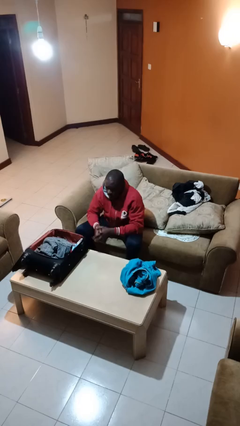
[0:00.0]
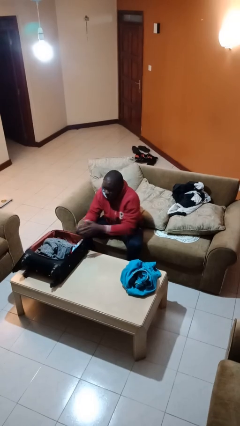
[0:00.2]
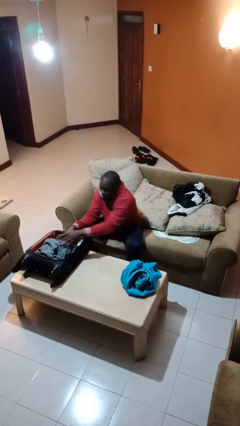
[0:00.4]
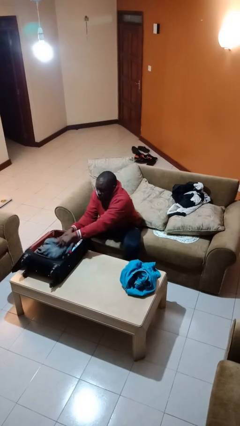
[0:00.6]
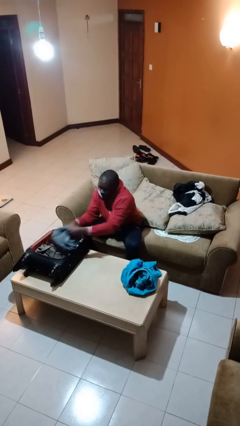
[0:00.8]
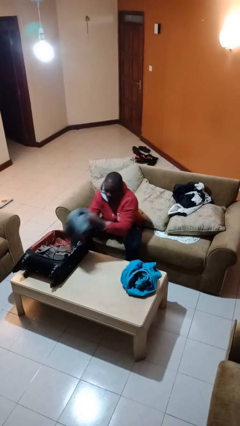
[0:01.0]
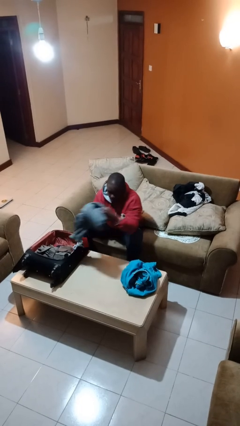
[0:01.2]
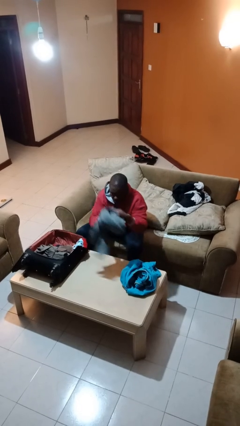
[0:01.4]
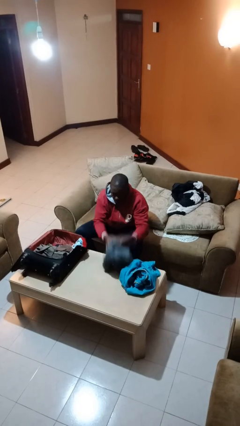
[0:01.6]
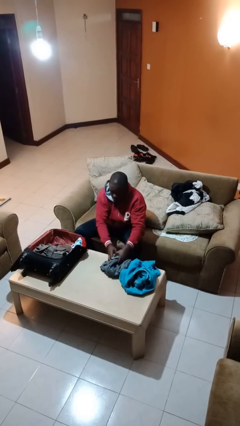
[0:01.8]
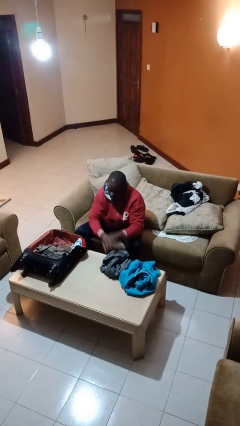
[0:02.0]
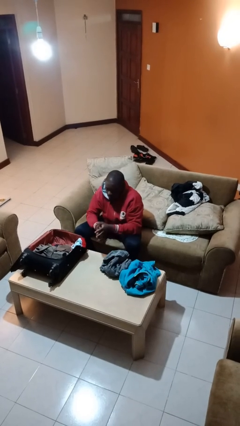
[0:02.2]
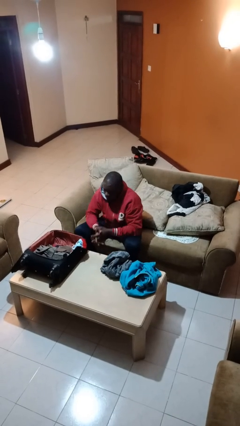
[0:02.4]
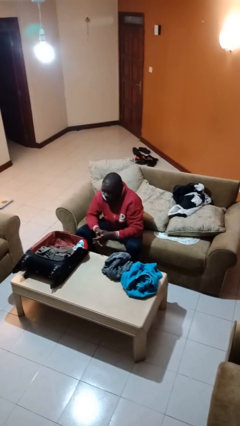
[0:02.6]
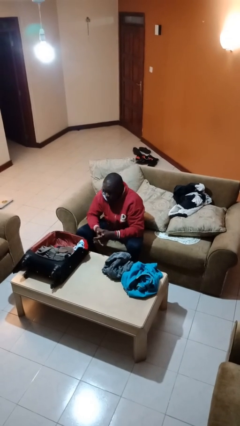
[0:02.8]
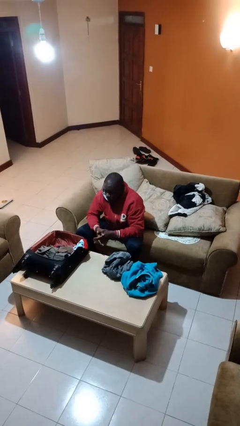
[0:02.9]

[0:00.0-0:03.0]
person unloads clothes from suitcase

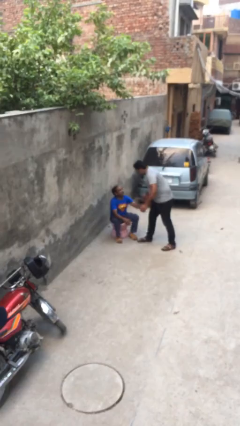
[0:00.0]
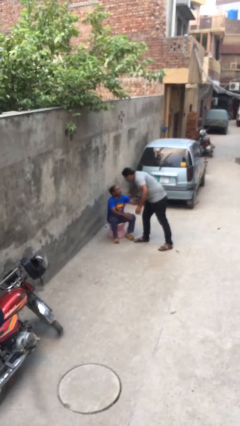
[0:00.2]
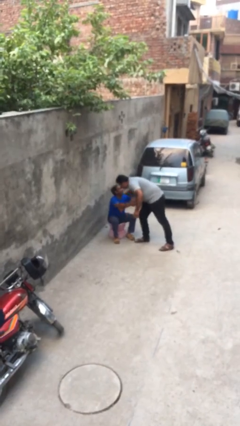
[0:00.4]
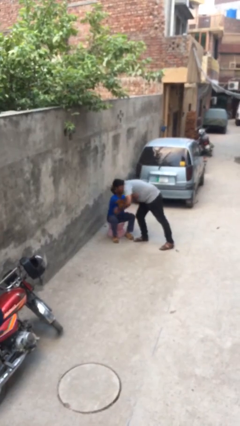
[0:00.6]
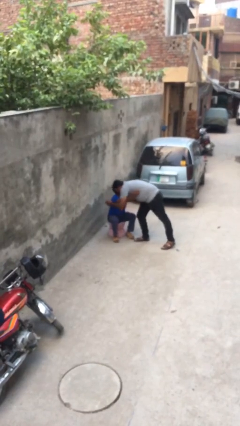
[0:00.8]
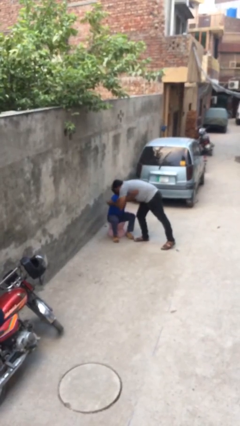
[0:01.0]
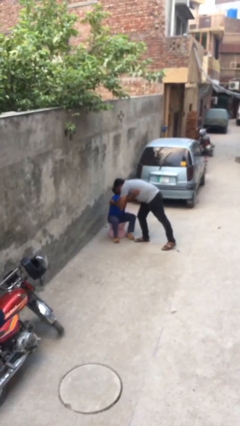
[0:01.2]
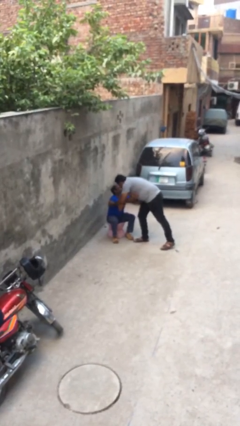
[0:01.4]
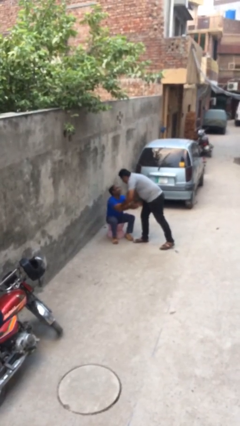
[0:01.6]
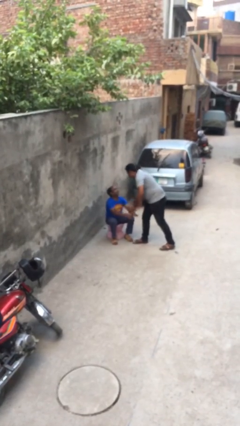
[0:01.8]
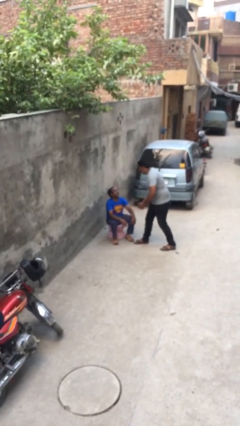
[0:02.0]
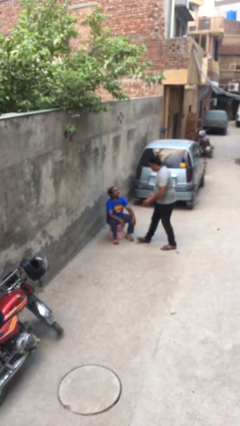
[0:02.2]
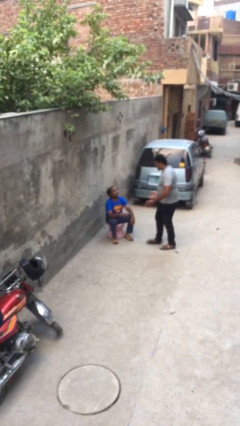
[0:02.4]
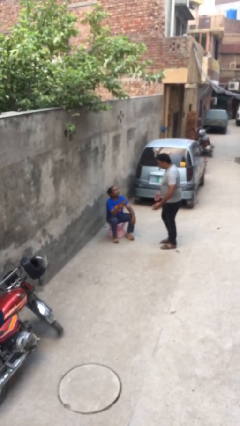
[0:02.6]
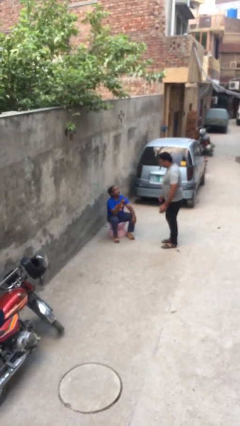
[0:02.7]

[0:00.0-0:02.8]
person embraces person

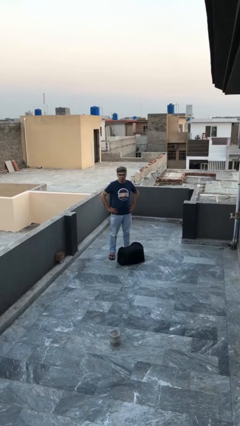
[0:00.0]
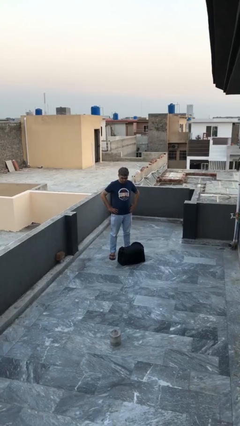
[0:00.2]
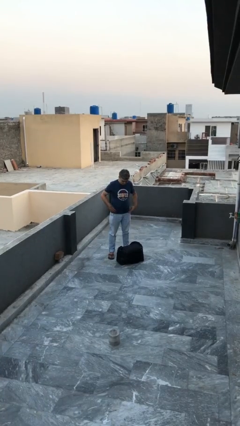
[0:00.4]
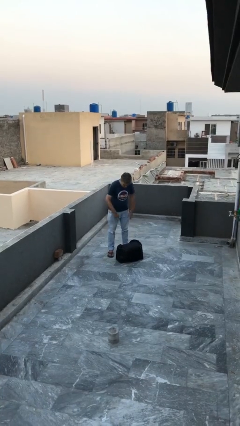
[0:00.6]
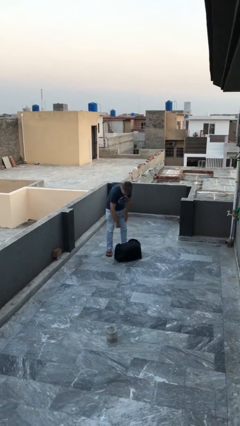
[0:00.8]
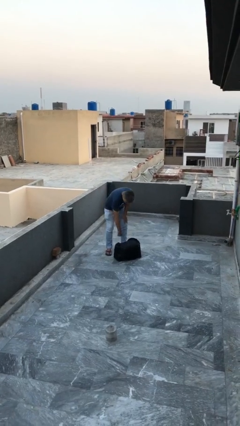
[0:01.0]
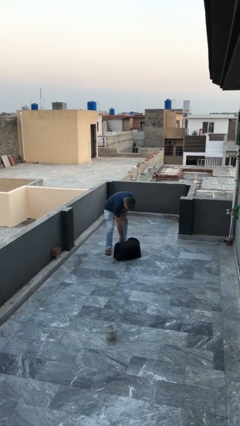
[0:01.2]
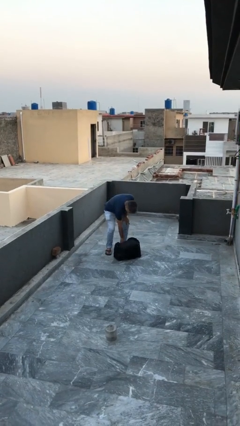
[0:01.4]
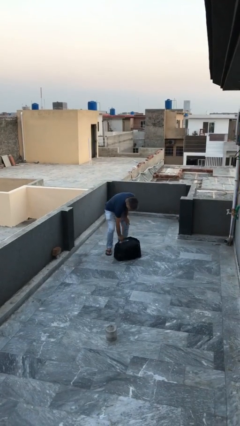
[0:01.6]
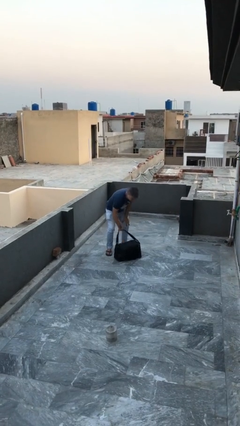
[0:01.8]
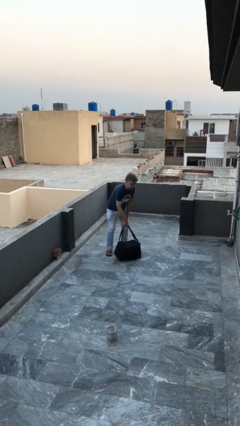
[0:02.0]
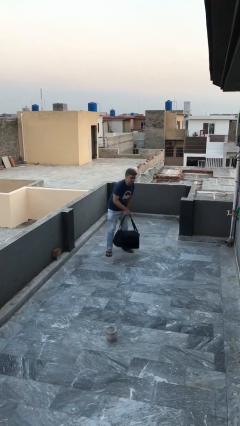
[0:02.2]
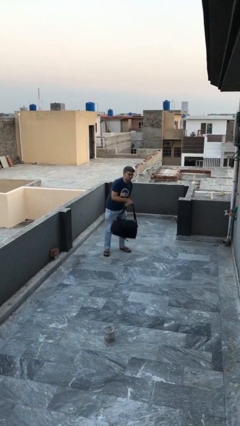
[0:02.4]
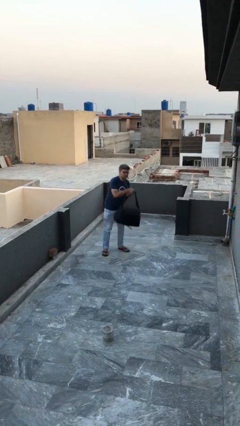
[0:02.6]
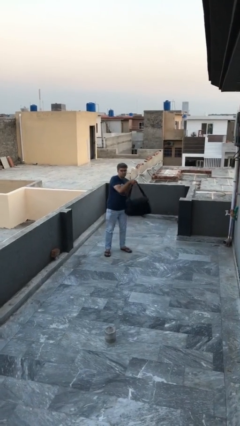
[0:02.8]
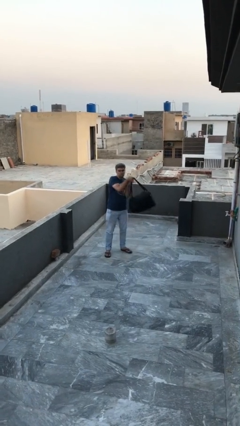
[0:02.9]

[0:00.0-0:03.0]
person picks up object from floor

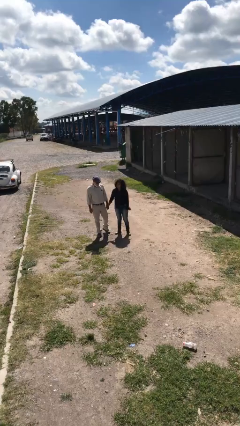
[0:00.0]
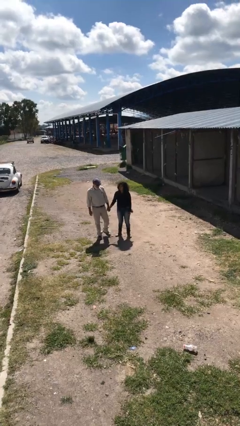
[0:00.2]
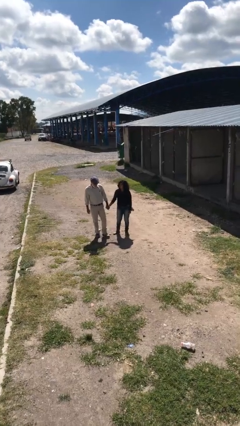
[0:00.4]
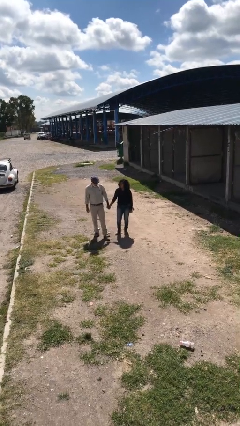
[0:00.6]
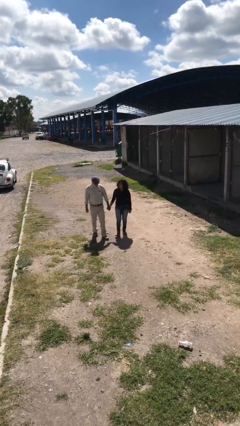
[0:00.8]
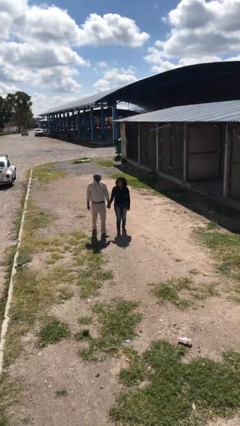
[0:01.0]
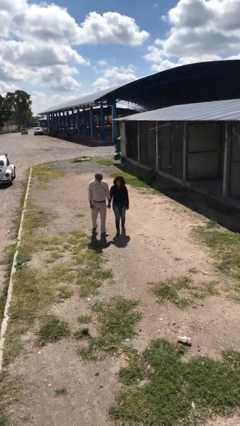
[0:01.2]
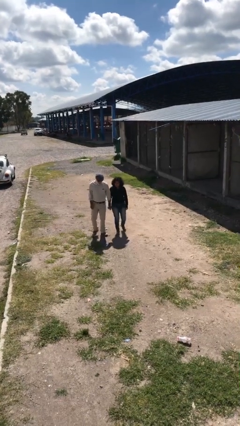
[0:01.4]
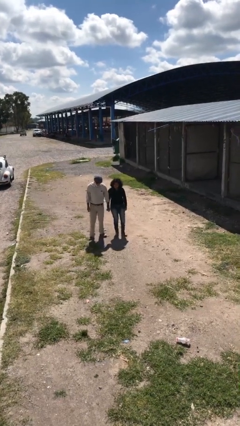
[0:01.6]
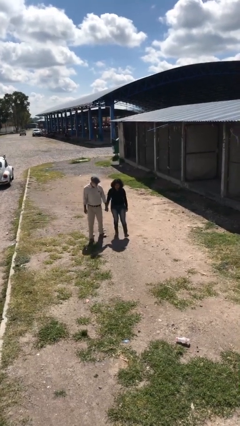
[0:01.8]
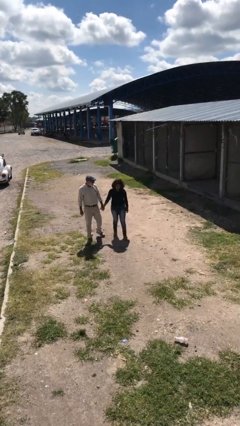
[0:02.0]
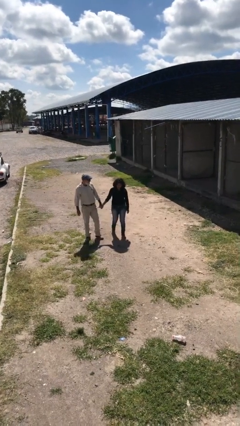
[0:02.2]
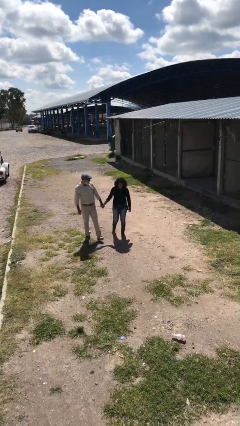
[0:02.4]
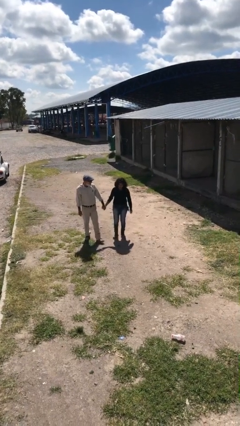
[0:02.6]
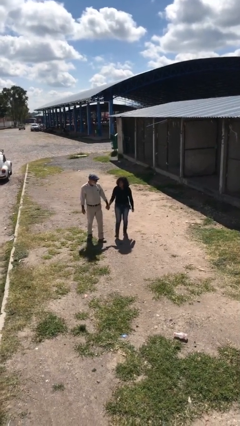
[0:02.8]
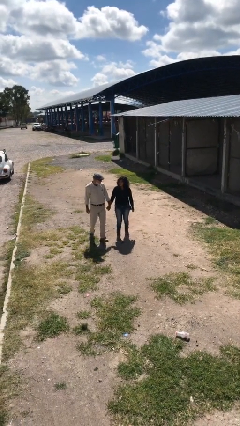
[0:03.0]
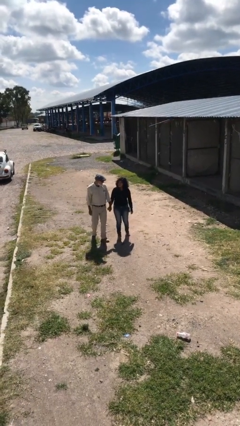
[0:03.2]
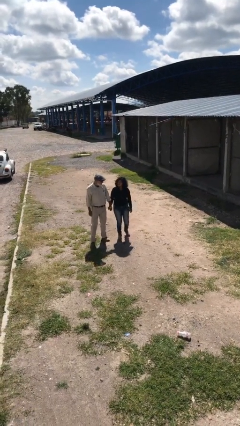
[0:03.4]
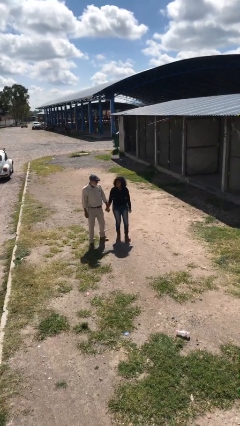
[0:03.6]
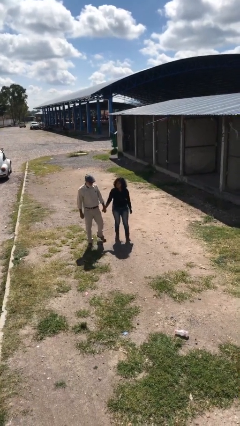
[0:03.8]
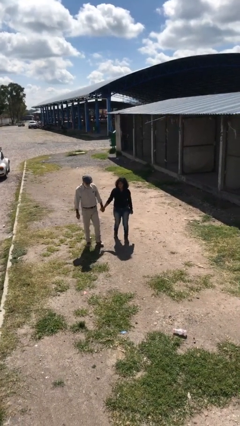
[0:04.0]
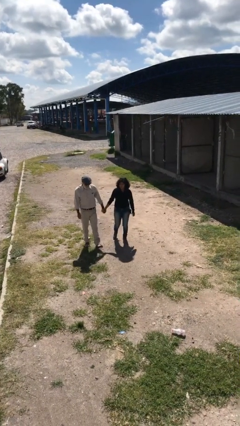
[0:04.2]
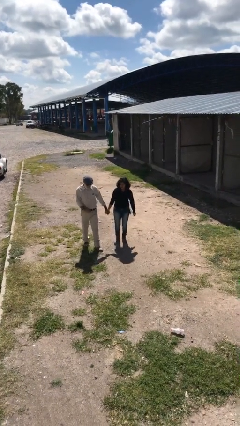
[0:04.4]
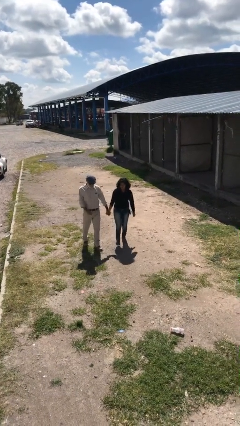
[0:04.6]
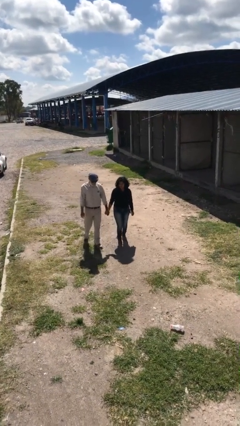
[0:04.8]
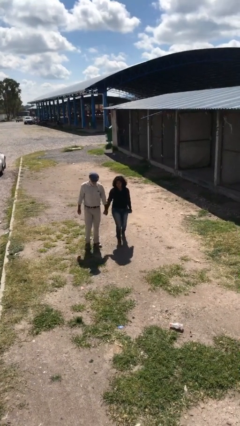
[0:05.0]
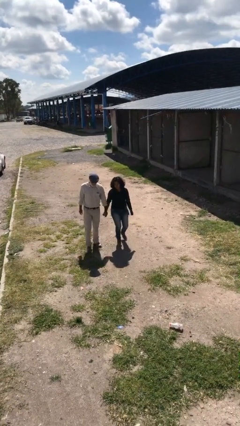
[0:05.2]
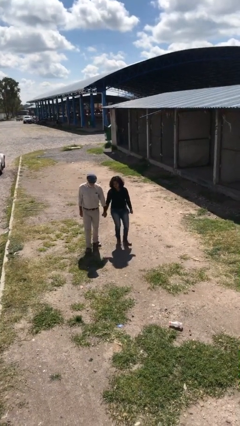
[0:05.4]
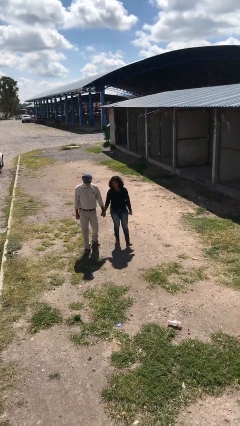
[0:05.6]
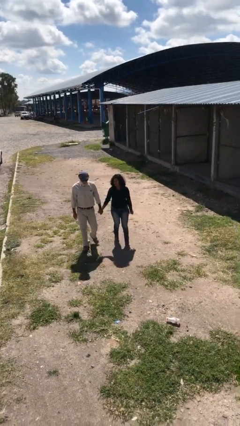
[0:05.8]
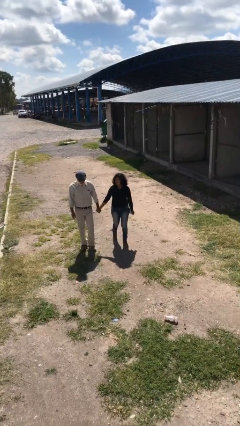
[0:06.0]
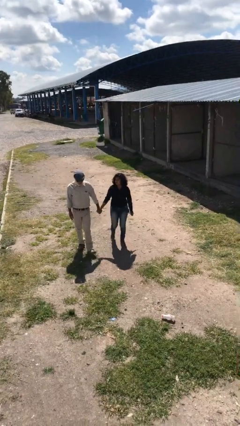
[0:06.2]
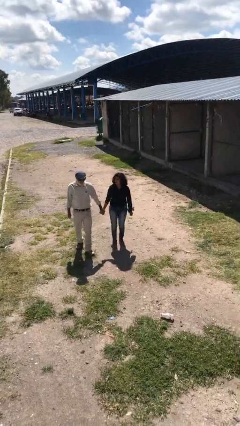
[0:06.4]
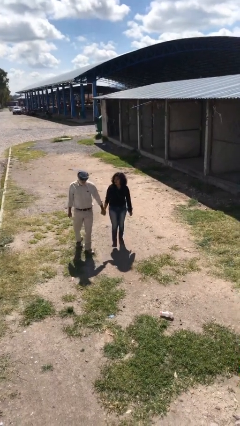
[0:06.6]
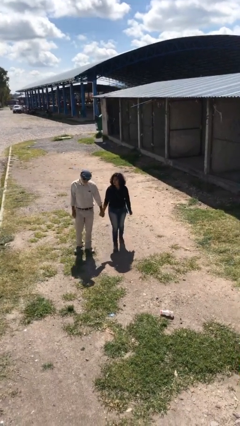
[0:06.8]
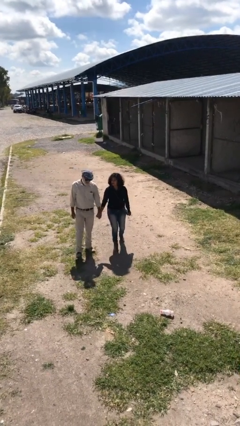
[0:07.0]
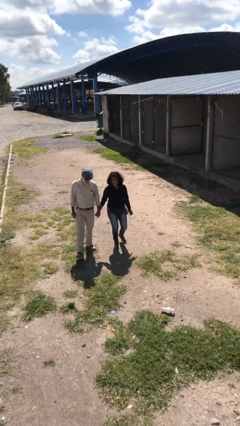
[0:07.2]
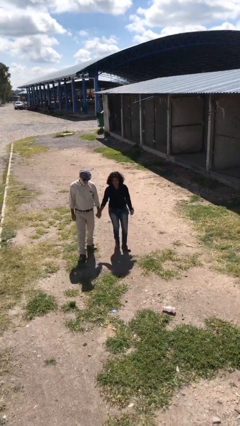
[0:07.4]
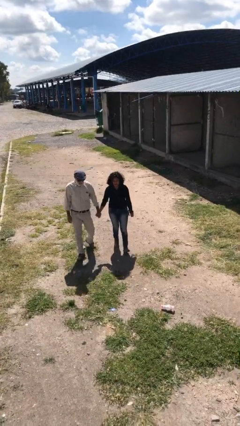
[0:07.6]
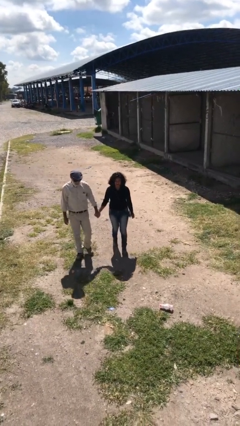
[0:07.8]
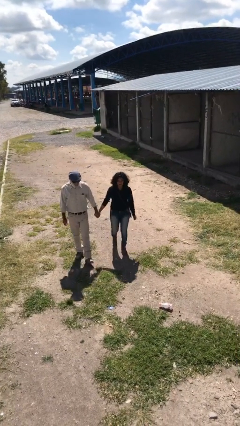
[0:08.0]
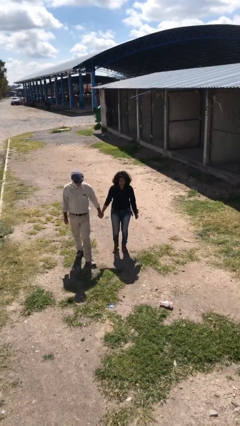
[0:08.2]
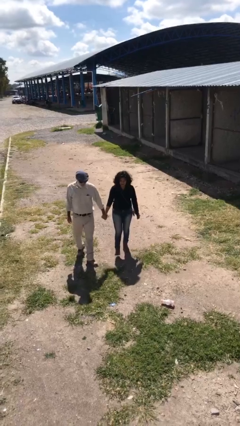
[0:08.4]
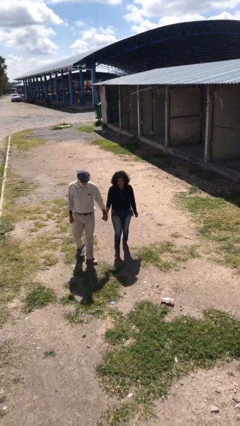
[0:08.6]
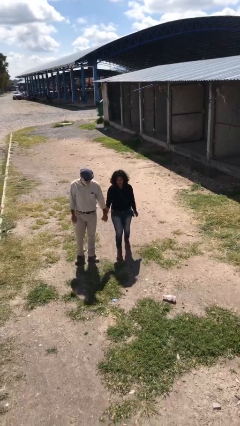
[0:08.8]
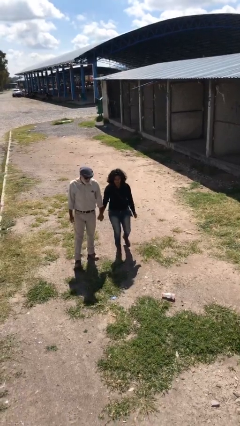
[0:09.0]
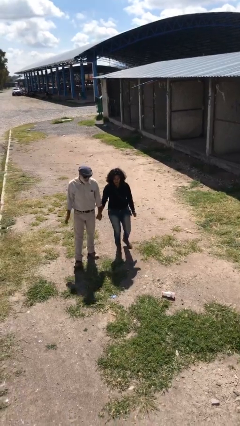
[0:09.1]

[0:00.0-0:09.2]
person holds hand
